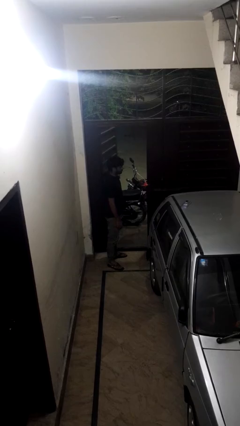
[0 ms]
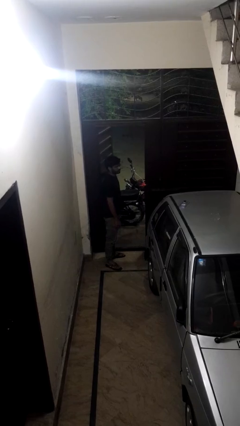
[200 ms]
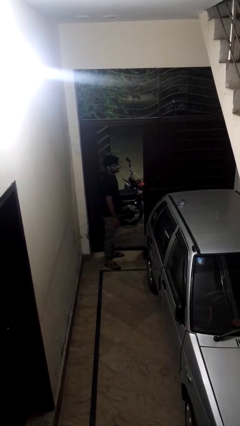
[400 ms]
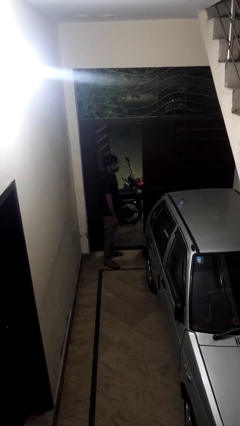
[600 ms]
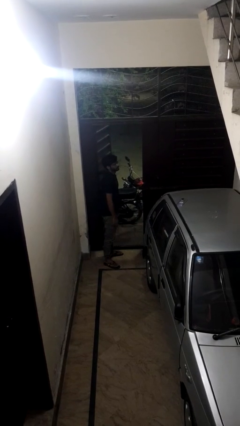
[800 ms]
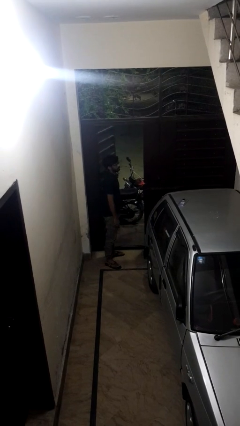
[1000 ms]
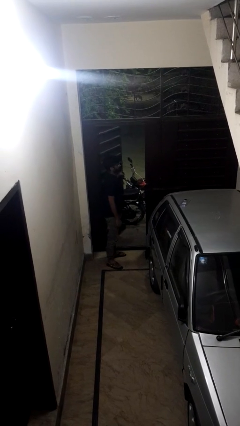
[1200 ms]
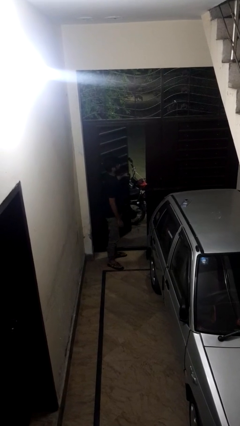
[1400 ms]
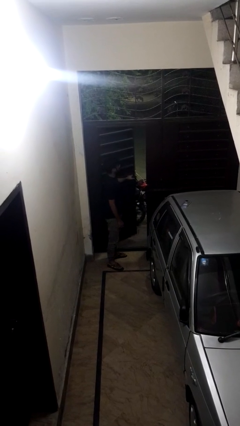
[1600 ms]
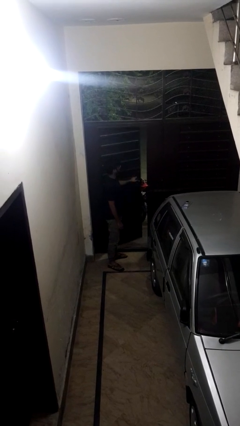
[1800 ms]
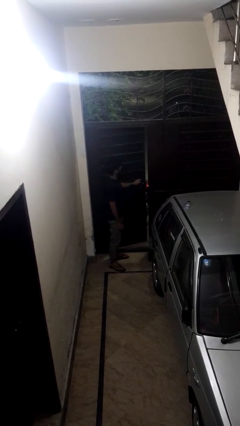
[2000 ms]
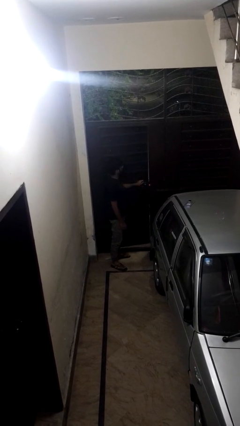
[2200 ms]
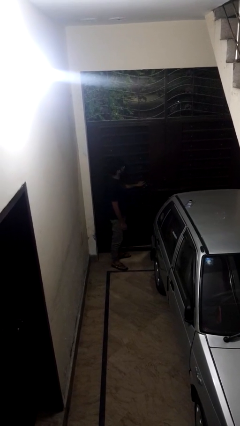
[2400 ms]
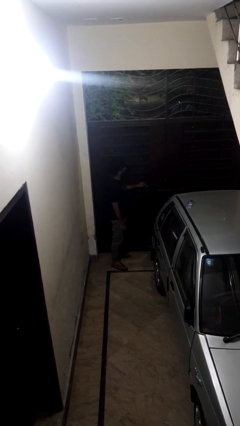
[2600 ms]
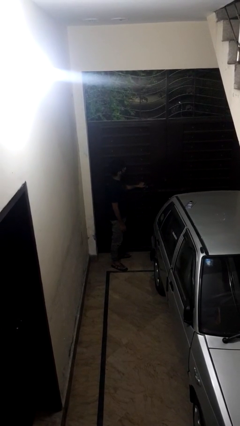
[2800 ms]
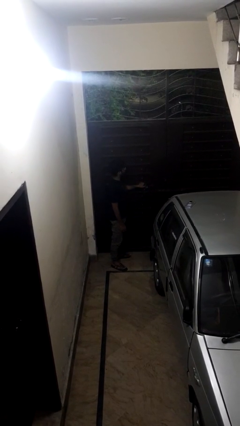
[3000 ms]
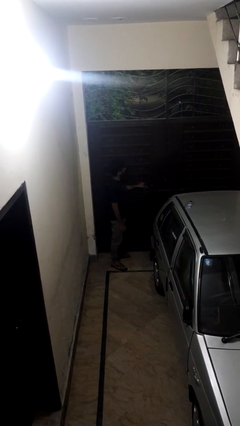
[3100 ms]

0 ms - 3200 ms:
person closes gate

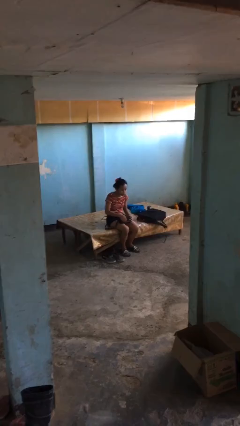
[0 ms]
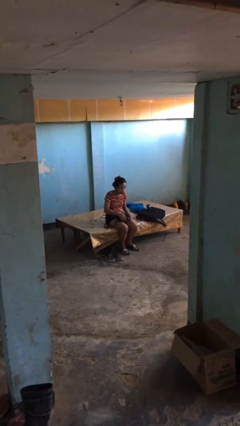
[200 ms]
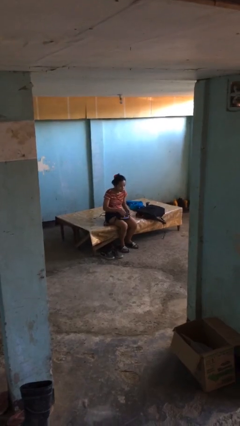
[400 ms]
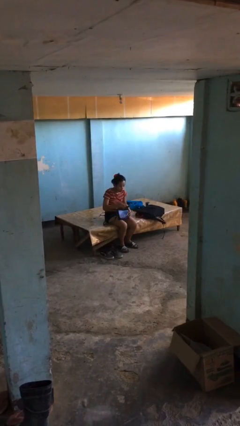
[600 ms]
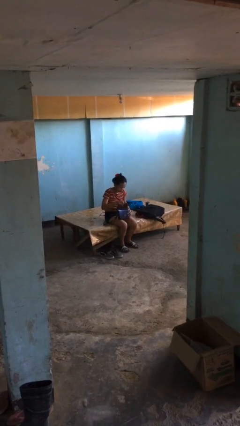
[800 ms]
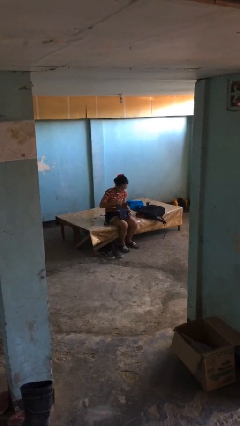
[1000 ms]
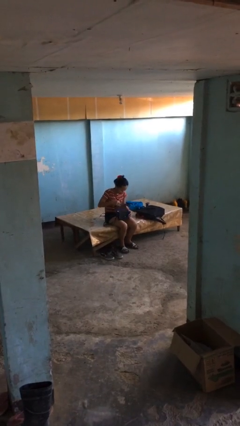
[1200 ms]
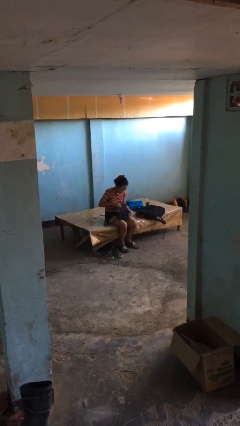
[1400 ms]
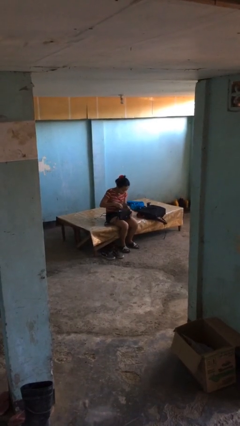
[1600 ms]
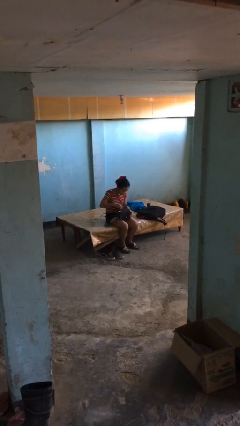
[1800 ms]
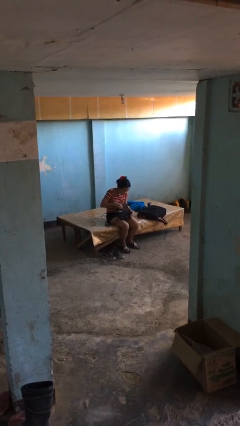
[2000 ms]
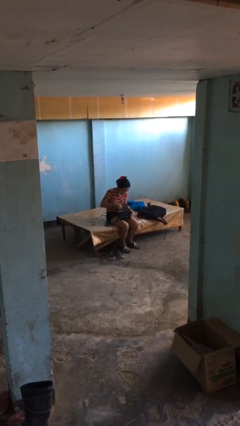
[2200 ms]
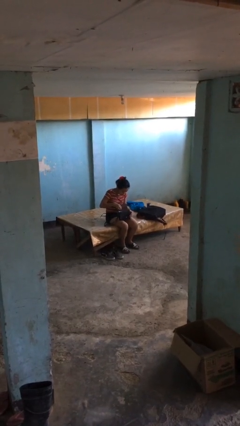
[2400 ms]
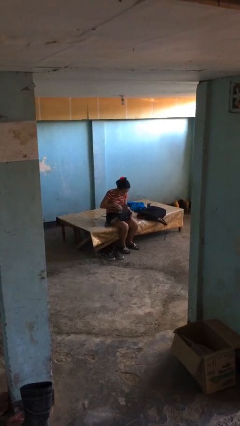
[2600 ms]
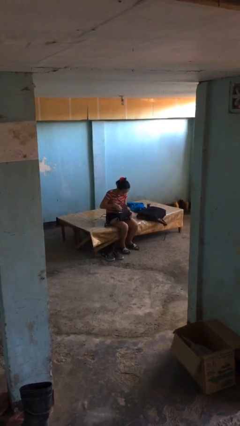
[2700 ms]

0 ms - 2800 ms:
person searches in purse

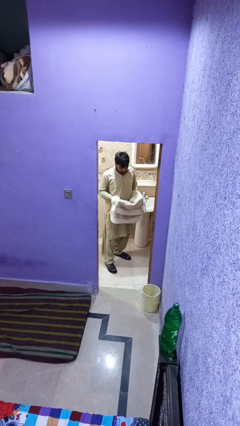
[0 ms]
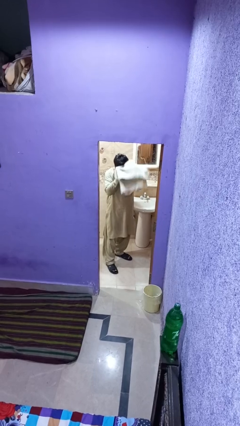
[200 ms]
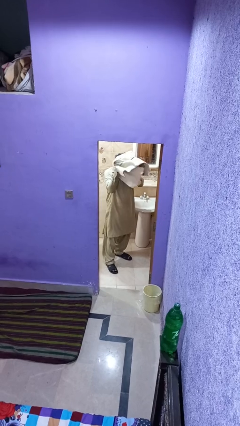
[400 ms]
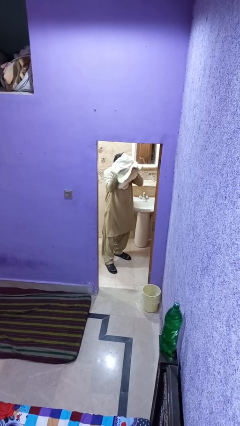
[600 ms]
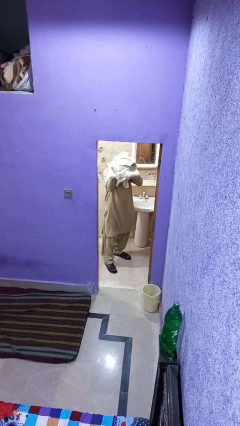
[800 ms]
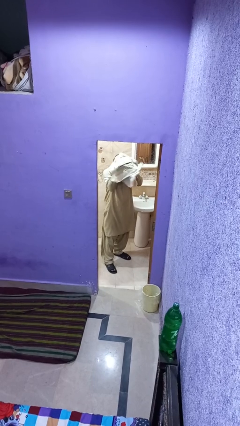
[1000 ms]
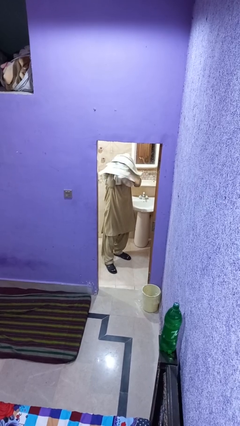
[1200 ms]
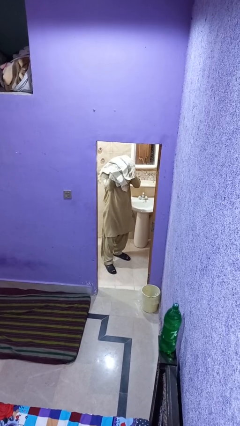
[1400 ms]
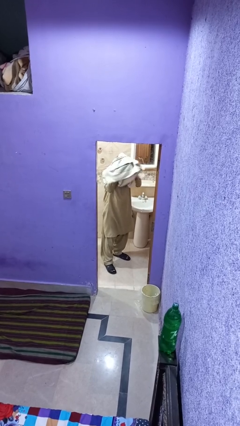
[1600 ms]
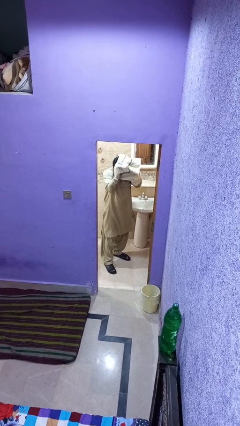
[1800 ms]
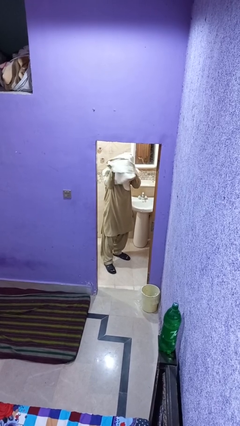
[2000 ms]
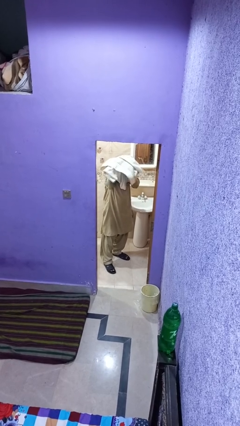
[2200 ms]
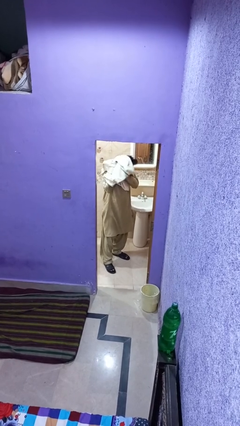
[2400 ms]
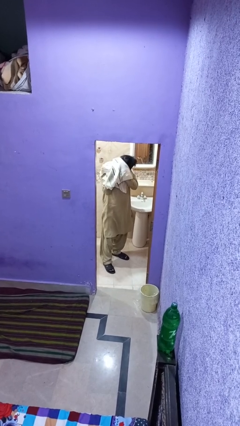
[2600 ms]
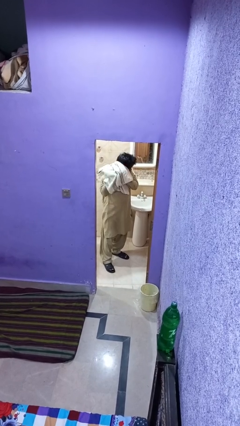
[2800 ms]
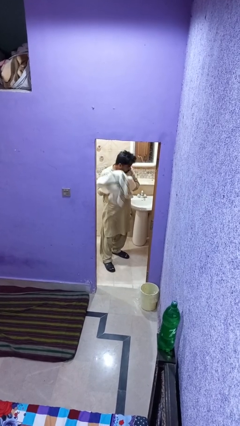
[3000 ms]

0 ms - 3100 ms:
person dries hair with towel

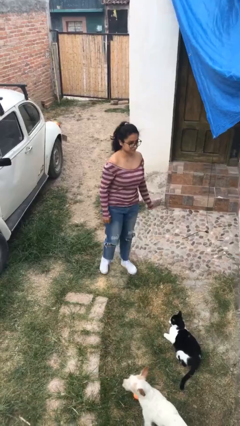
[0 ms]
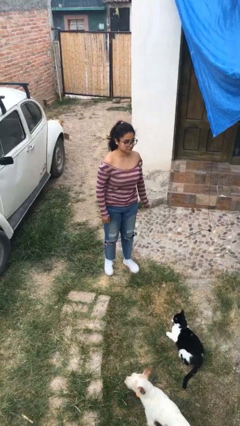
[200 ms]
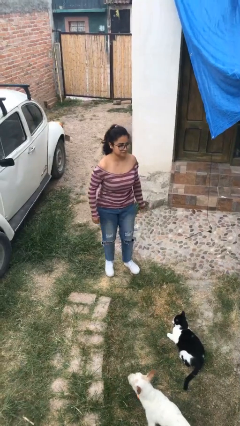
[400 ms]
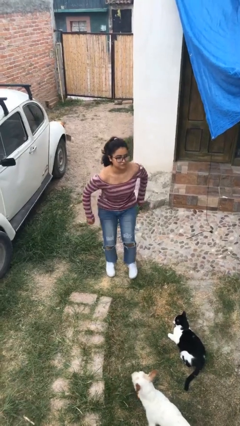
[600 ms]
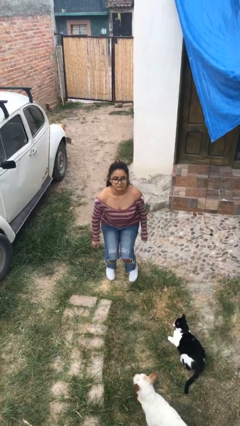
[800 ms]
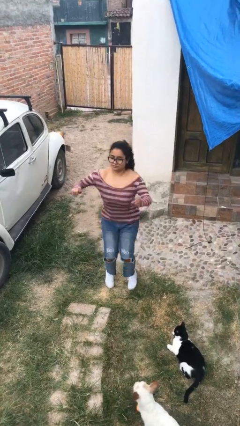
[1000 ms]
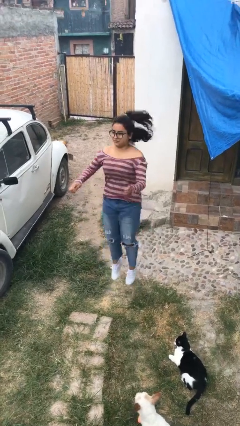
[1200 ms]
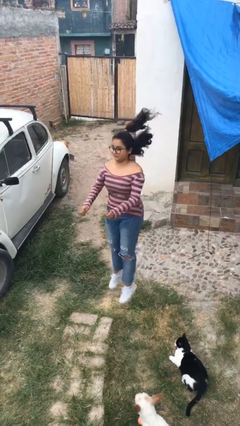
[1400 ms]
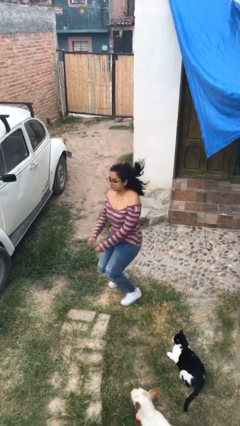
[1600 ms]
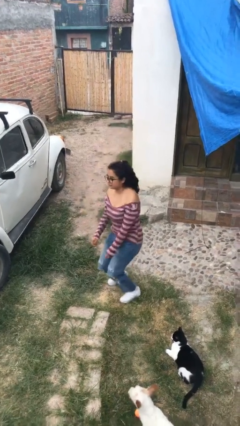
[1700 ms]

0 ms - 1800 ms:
person jumps

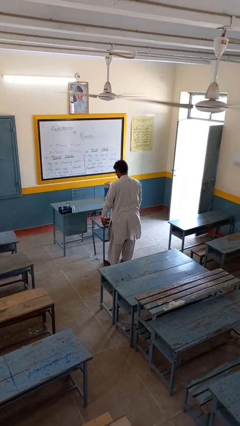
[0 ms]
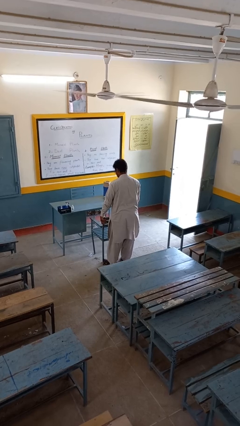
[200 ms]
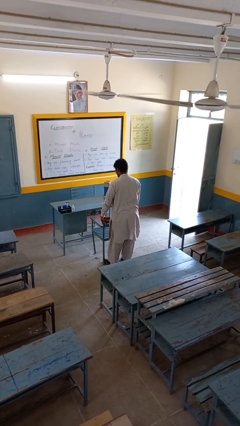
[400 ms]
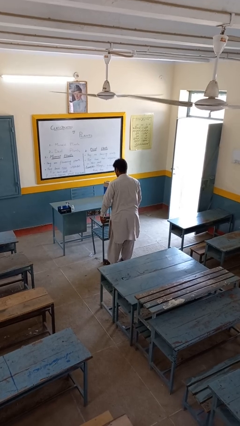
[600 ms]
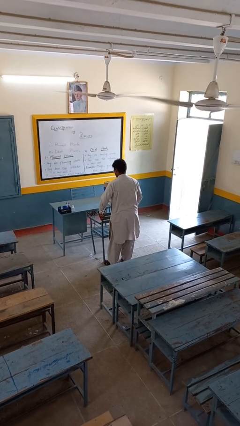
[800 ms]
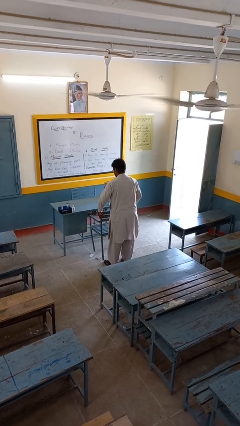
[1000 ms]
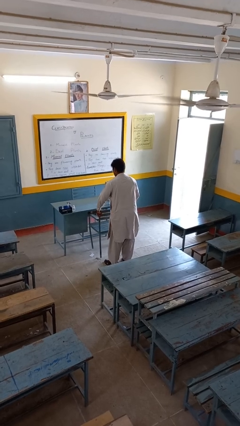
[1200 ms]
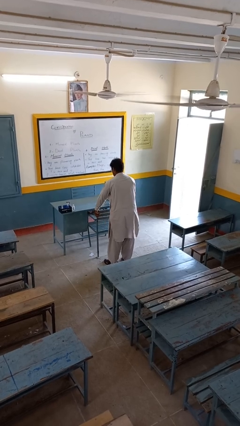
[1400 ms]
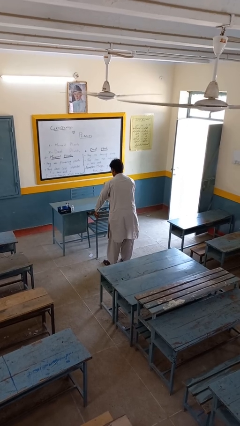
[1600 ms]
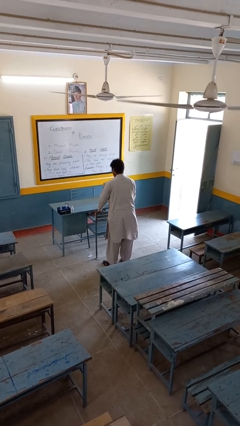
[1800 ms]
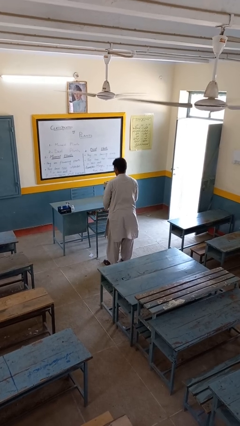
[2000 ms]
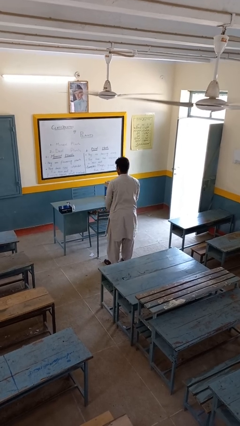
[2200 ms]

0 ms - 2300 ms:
person pushes in chair

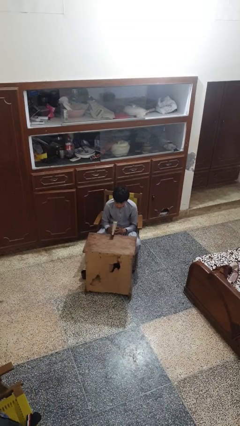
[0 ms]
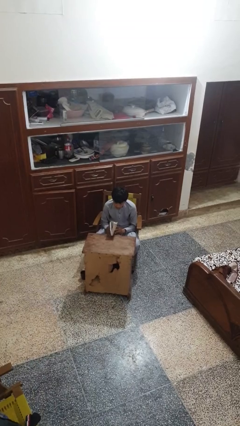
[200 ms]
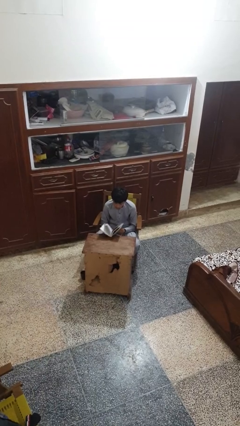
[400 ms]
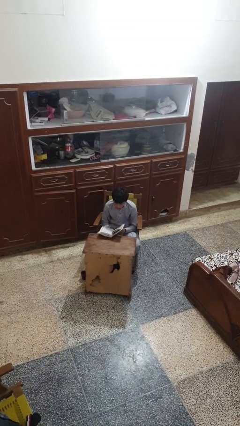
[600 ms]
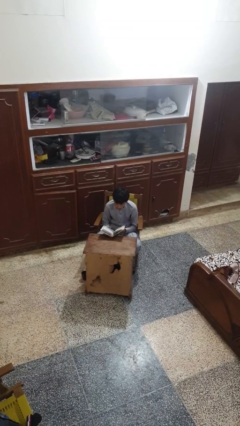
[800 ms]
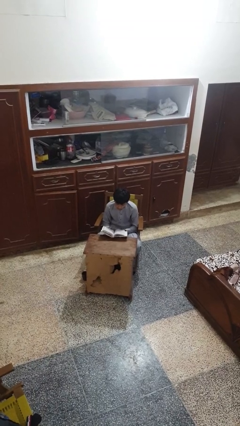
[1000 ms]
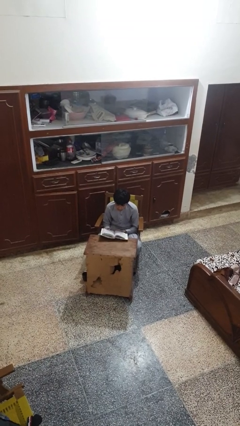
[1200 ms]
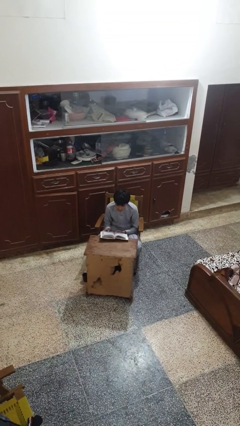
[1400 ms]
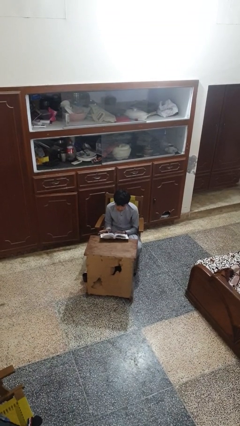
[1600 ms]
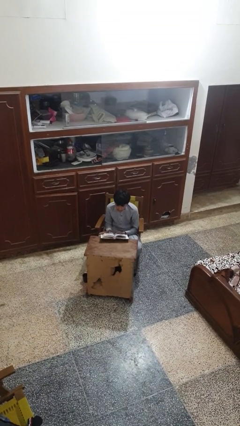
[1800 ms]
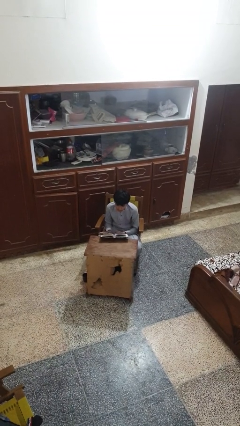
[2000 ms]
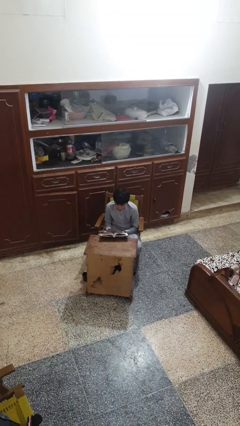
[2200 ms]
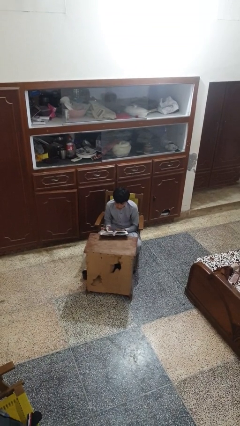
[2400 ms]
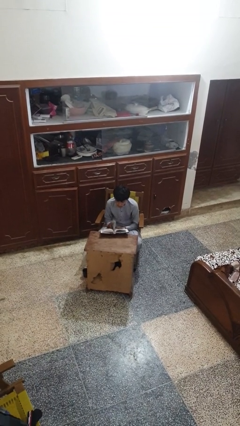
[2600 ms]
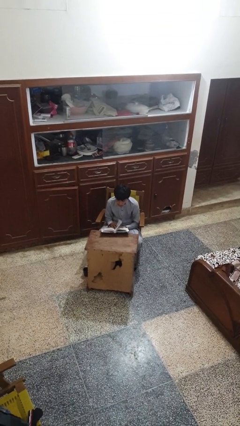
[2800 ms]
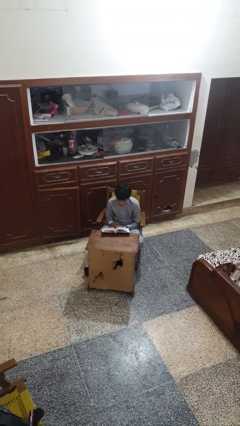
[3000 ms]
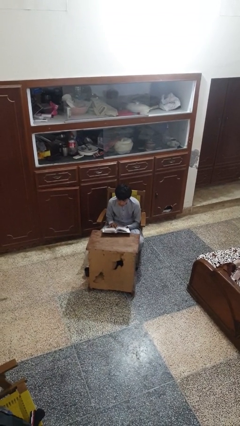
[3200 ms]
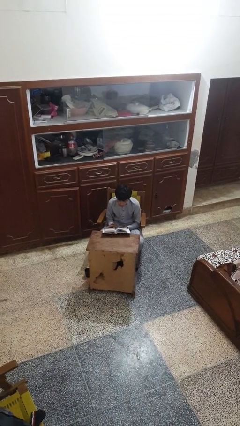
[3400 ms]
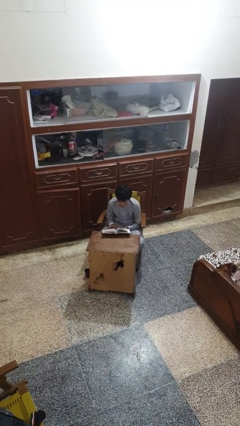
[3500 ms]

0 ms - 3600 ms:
person reads book

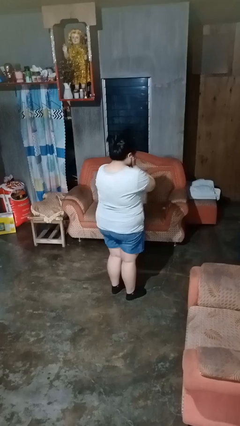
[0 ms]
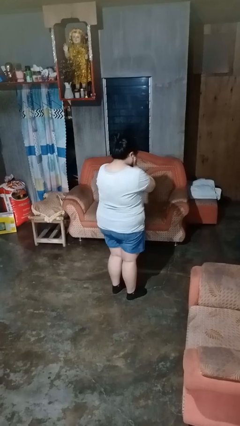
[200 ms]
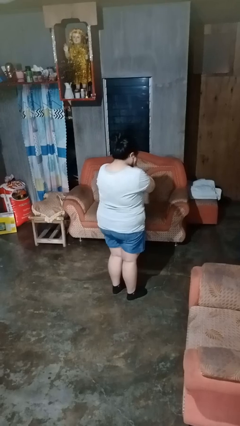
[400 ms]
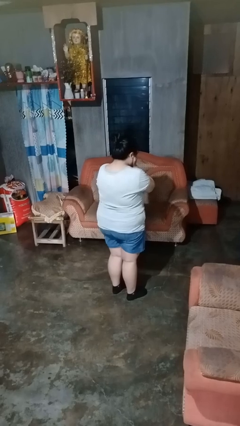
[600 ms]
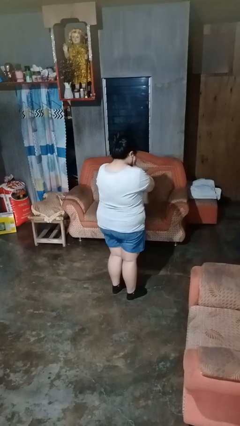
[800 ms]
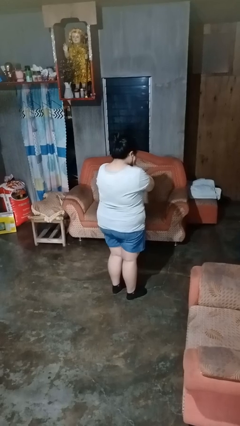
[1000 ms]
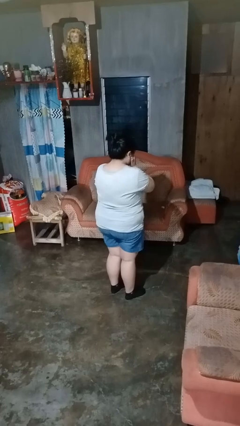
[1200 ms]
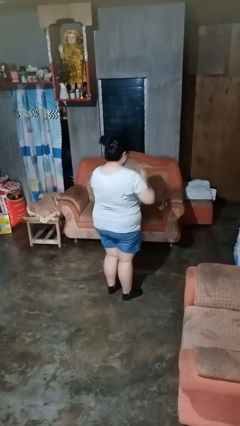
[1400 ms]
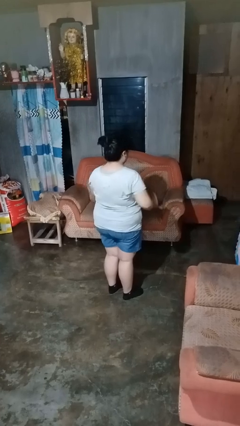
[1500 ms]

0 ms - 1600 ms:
person covers face with hands
